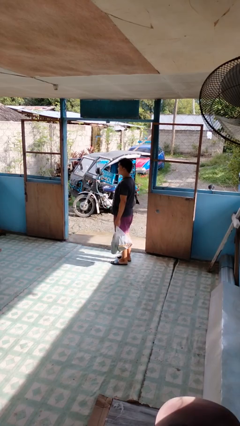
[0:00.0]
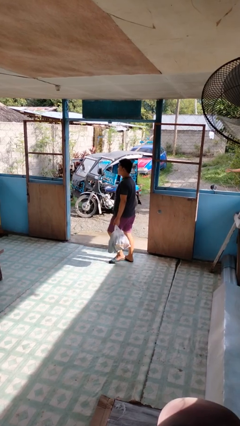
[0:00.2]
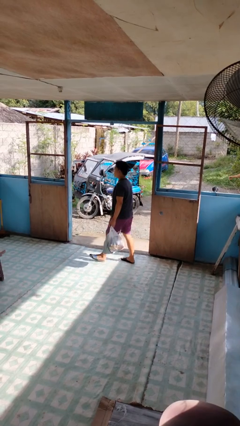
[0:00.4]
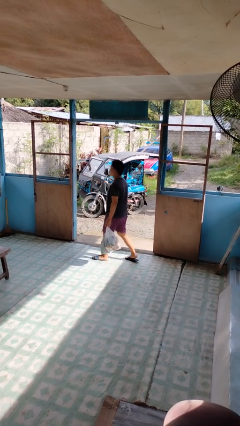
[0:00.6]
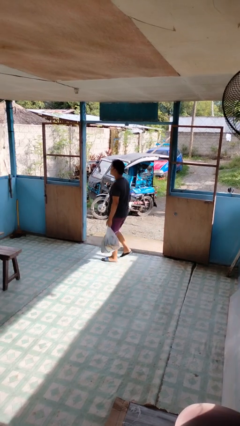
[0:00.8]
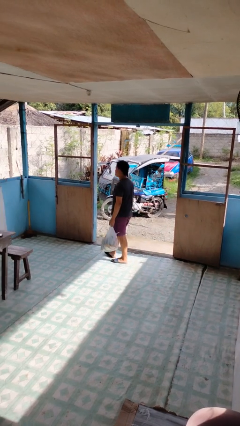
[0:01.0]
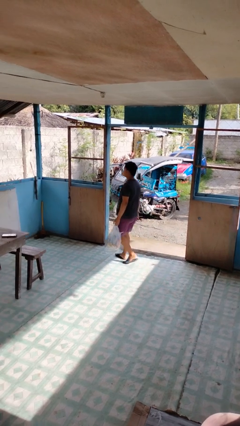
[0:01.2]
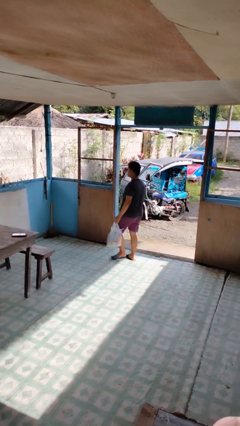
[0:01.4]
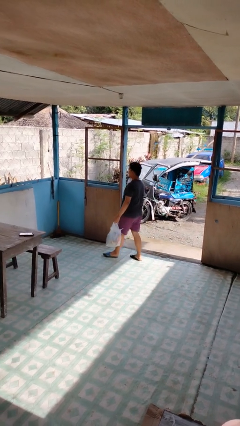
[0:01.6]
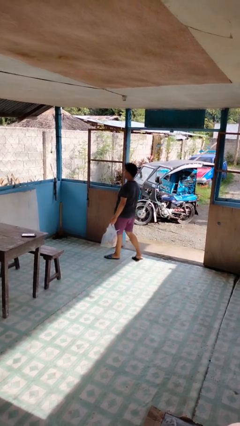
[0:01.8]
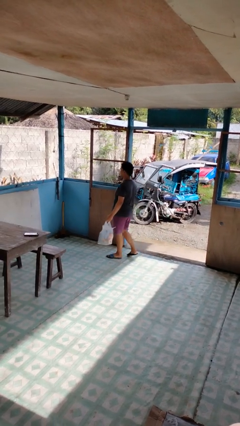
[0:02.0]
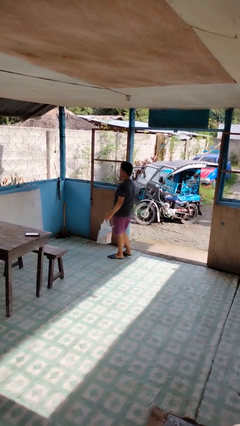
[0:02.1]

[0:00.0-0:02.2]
person carries groceries

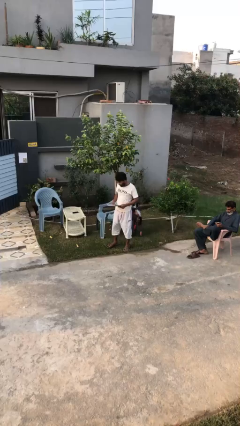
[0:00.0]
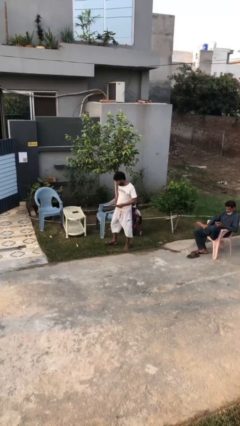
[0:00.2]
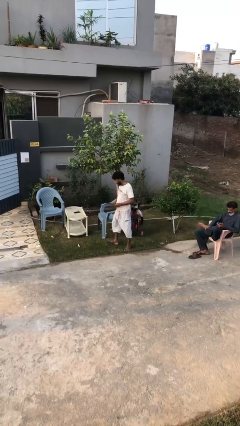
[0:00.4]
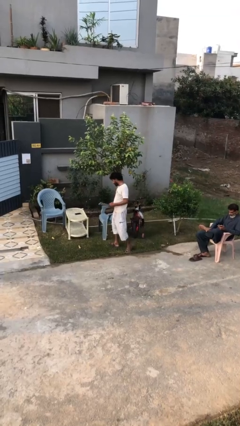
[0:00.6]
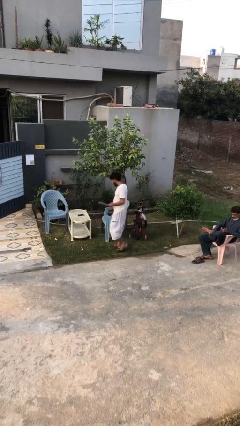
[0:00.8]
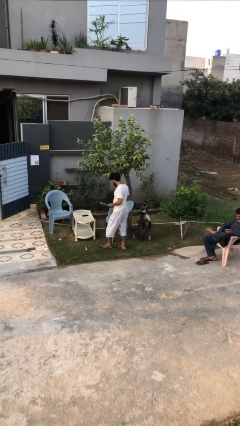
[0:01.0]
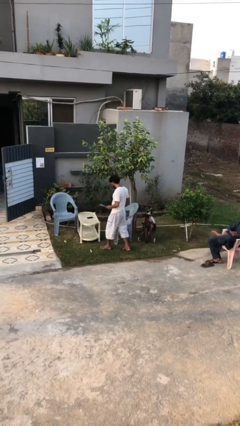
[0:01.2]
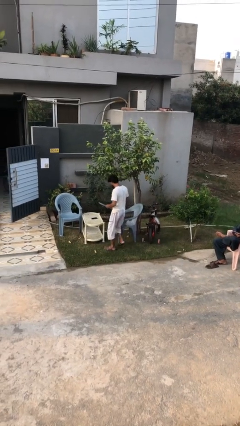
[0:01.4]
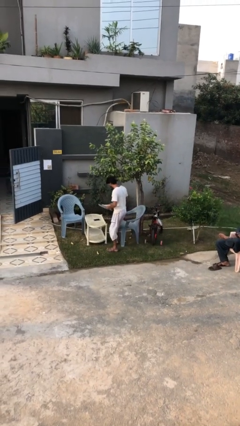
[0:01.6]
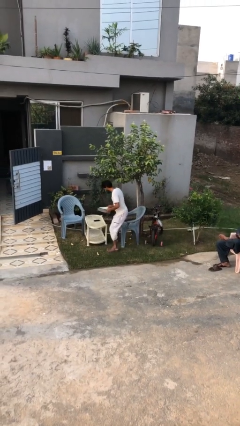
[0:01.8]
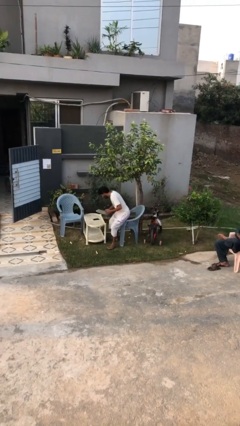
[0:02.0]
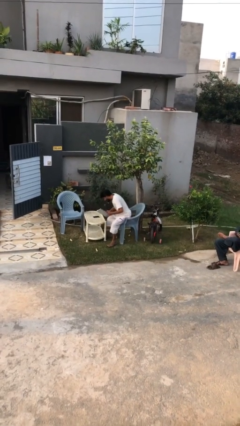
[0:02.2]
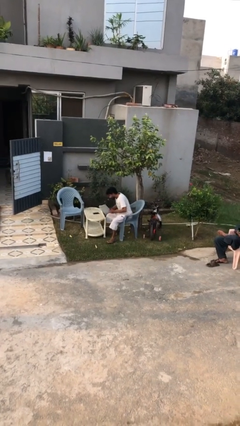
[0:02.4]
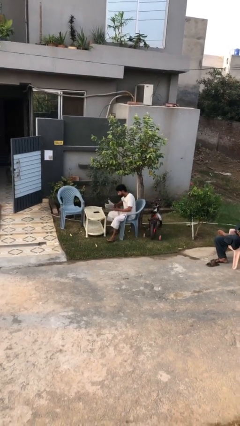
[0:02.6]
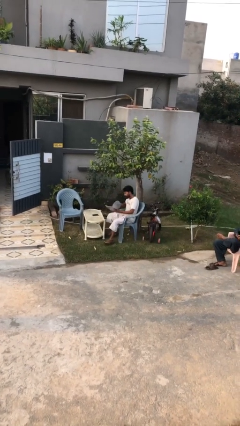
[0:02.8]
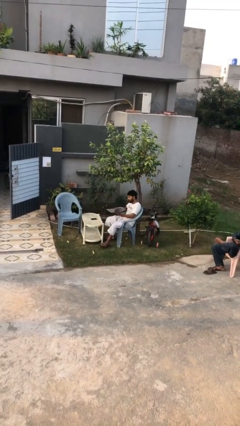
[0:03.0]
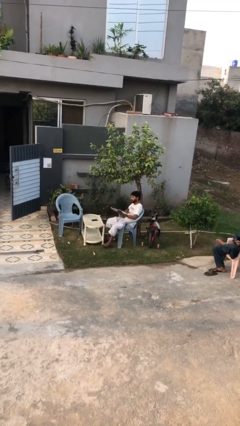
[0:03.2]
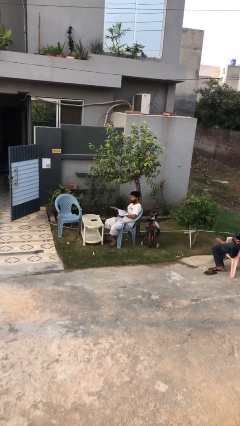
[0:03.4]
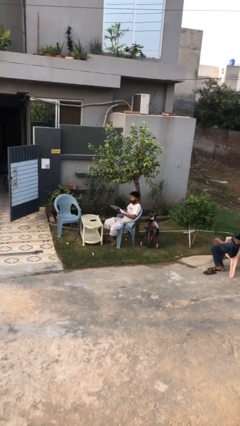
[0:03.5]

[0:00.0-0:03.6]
person sits down

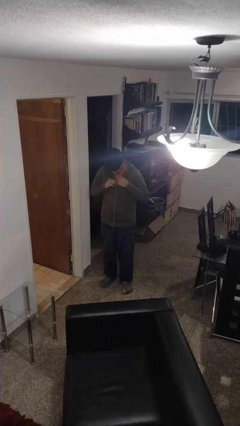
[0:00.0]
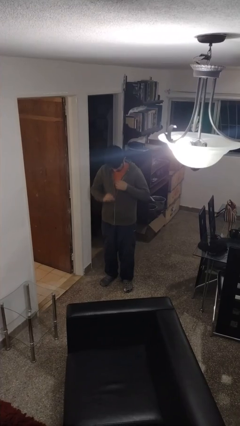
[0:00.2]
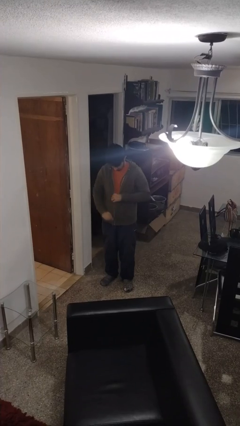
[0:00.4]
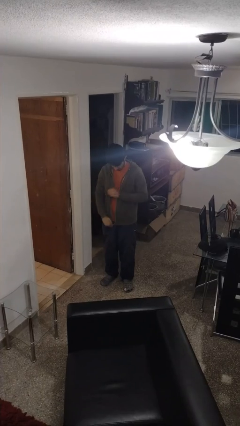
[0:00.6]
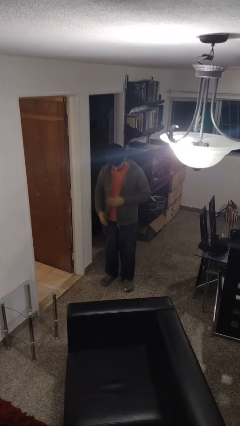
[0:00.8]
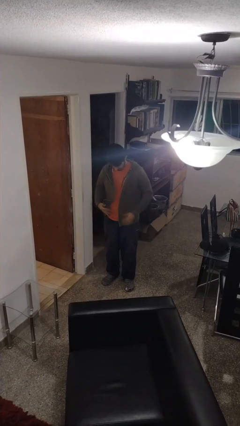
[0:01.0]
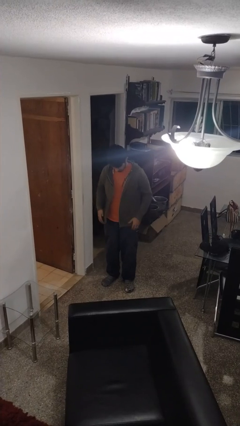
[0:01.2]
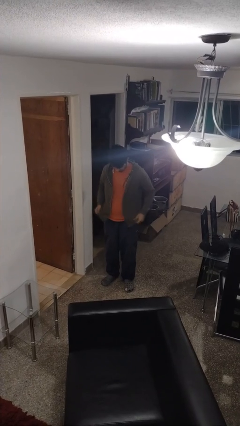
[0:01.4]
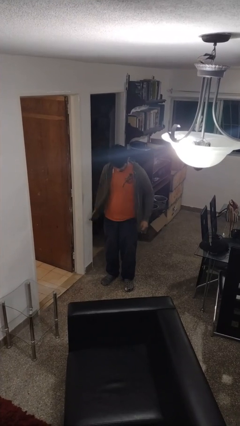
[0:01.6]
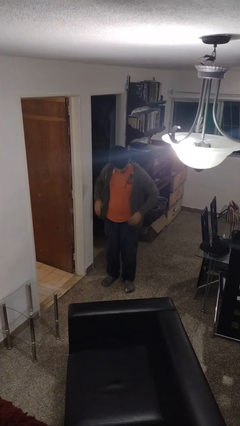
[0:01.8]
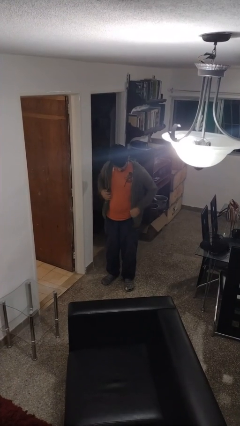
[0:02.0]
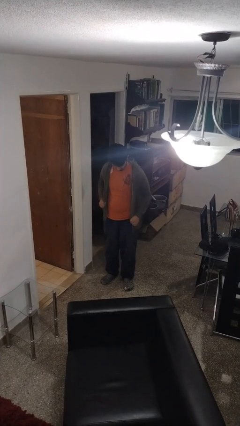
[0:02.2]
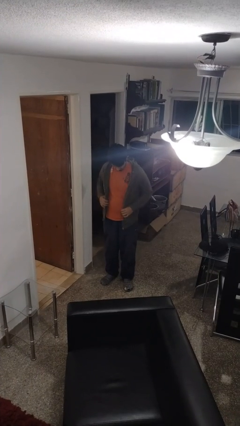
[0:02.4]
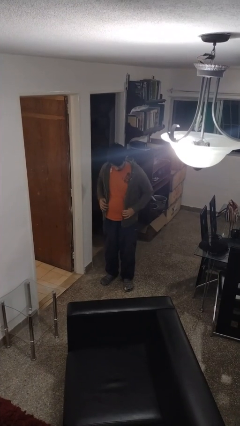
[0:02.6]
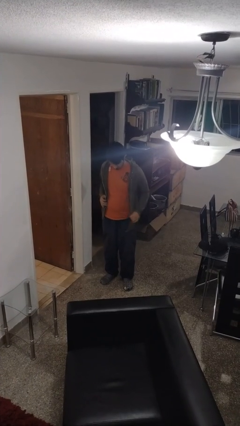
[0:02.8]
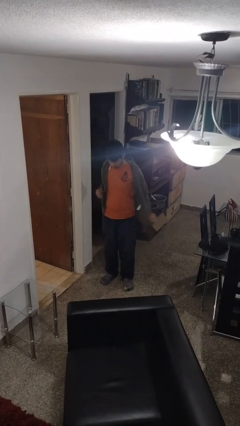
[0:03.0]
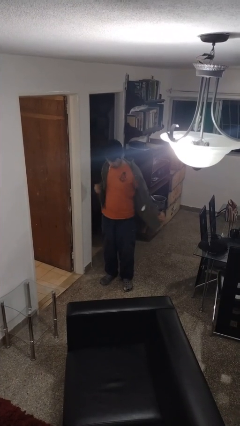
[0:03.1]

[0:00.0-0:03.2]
person unzips jacket

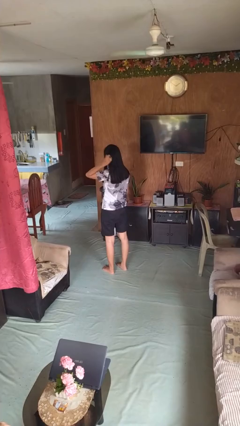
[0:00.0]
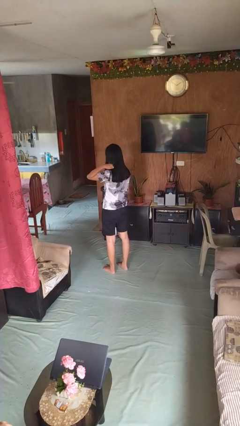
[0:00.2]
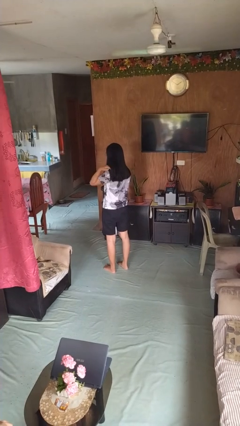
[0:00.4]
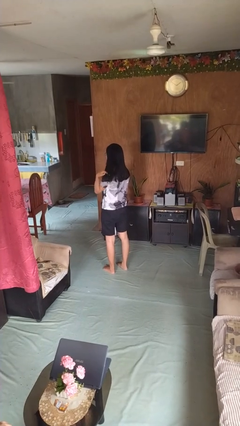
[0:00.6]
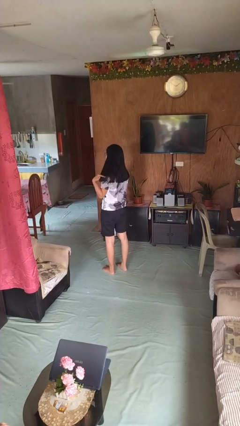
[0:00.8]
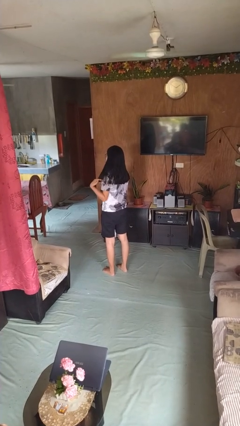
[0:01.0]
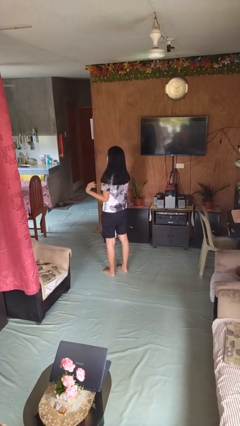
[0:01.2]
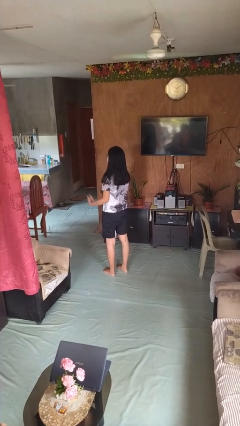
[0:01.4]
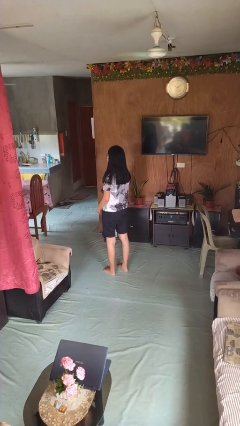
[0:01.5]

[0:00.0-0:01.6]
person strokes hair

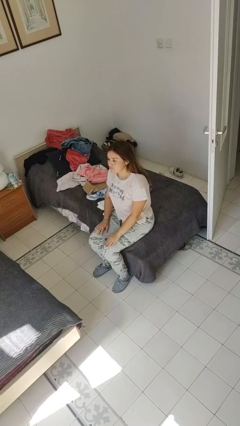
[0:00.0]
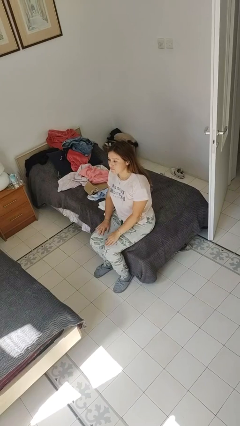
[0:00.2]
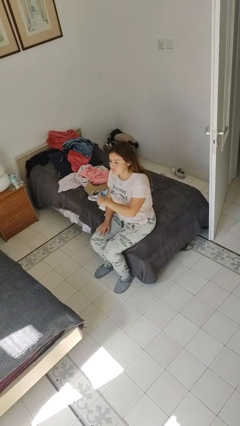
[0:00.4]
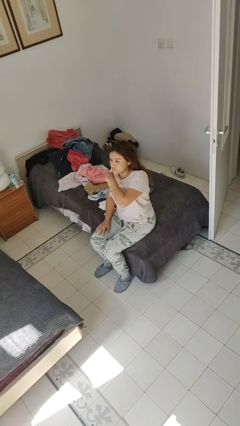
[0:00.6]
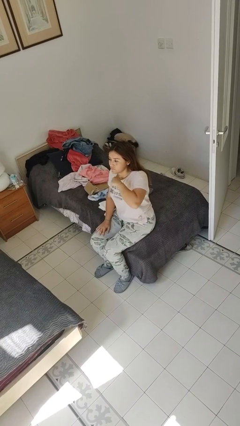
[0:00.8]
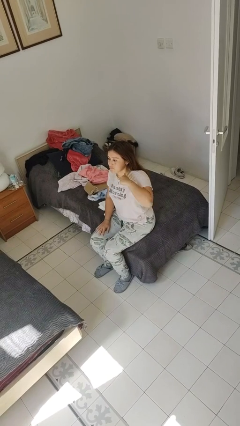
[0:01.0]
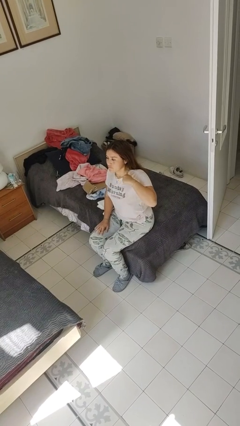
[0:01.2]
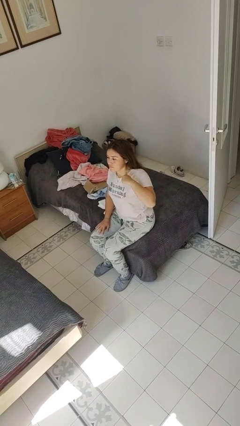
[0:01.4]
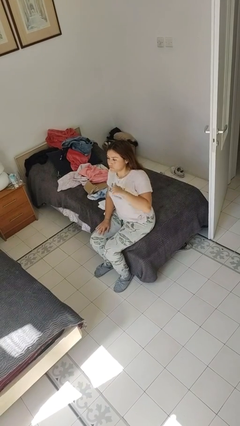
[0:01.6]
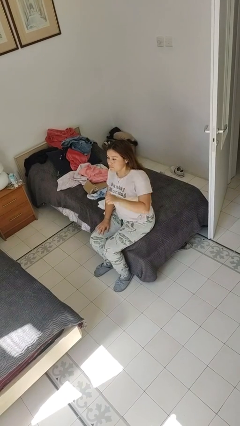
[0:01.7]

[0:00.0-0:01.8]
person gestures cut

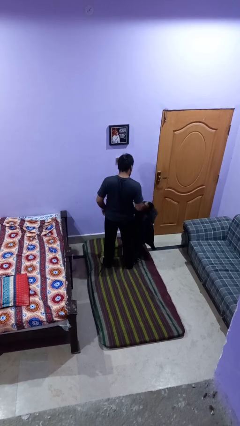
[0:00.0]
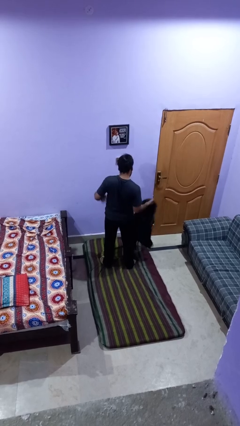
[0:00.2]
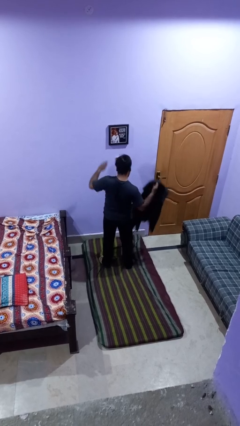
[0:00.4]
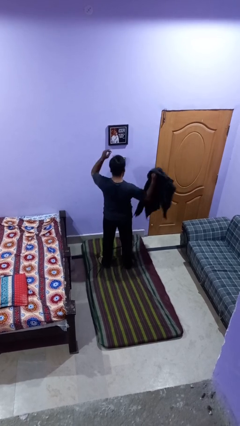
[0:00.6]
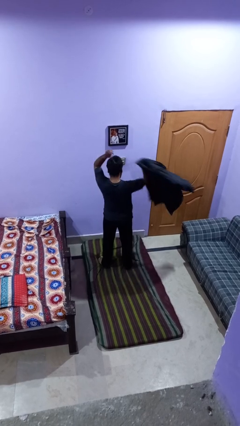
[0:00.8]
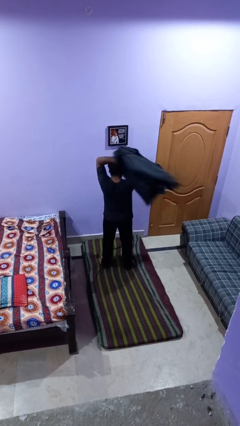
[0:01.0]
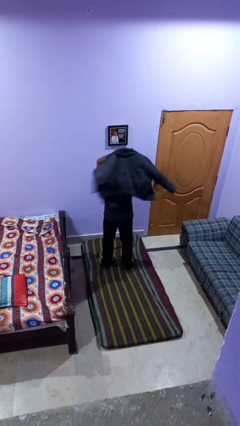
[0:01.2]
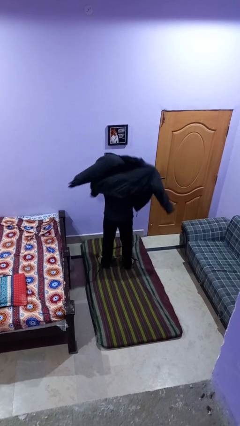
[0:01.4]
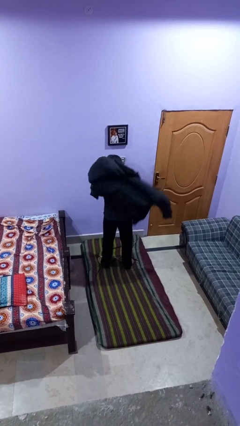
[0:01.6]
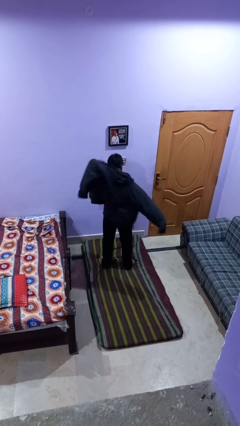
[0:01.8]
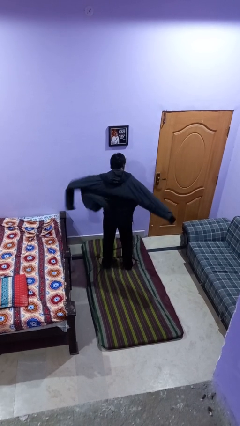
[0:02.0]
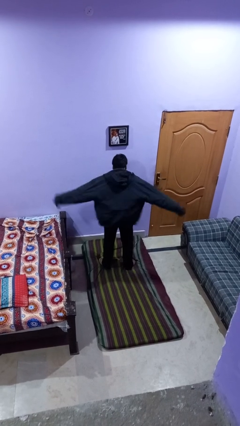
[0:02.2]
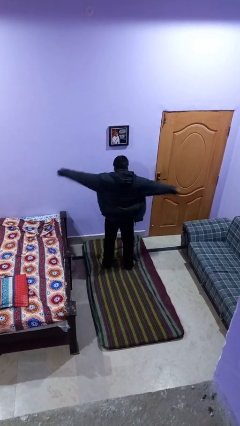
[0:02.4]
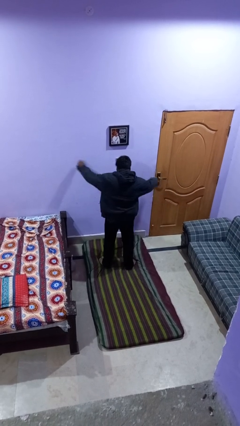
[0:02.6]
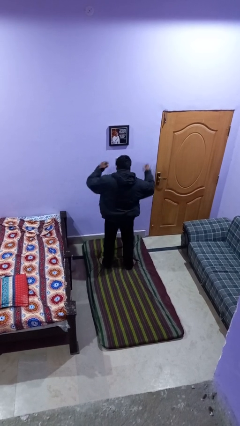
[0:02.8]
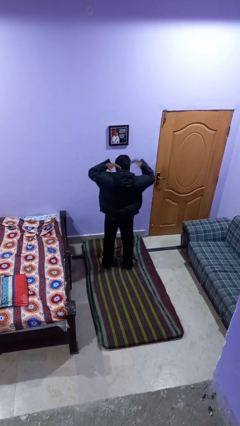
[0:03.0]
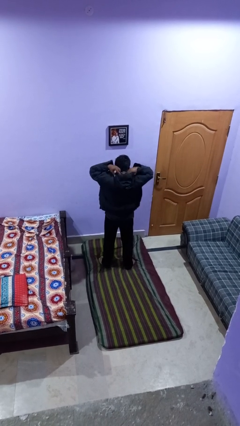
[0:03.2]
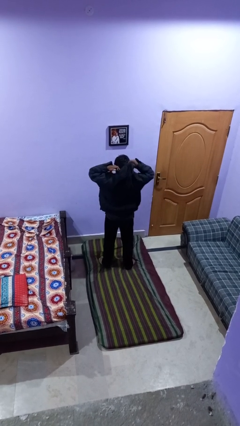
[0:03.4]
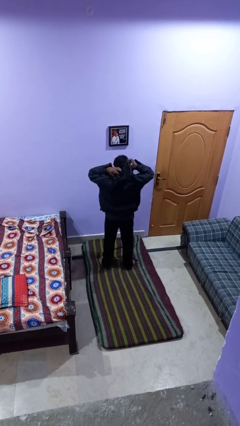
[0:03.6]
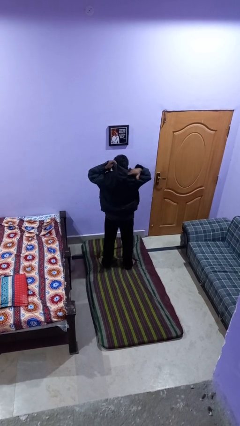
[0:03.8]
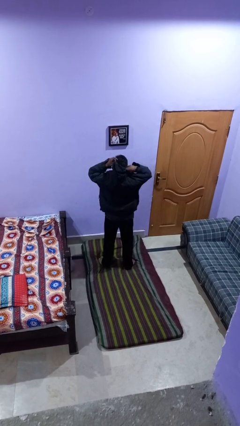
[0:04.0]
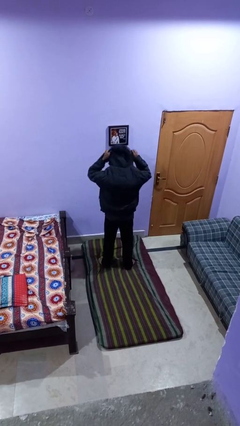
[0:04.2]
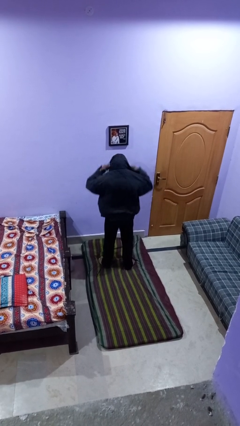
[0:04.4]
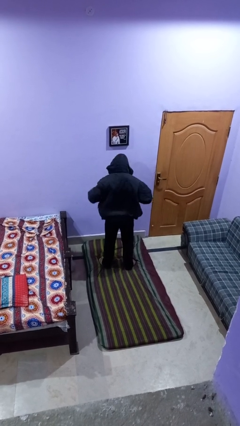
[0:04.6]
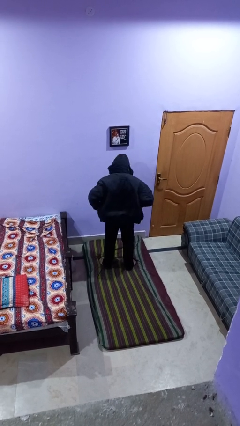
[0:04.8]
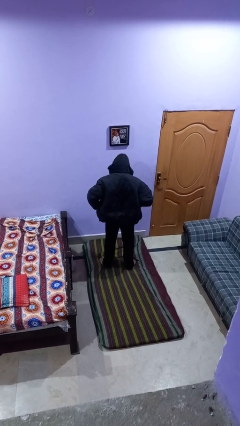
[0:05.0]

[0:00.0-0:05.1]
person puts on hoodie

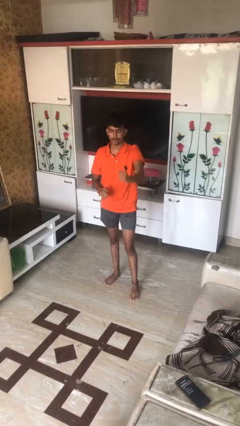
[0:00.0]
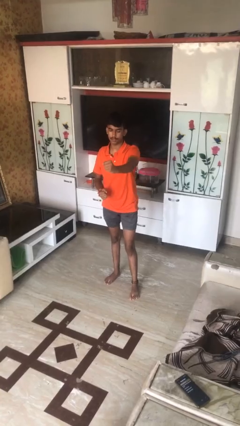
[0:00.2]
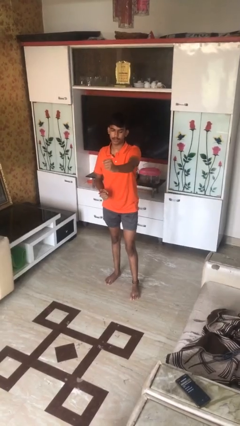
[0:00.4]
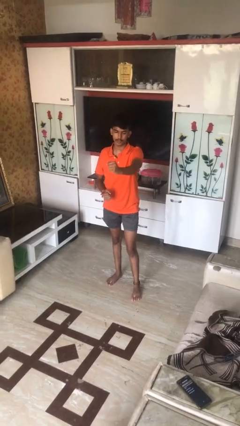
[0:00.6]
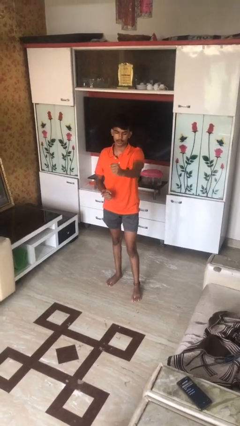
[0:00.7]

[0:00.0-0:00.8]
person punches
